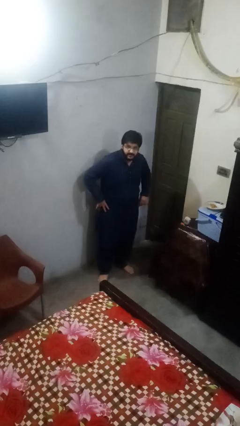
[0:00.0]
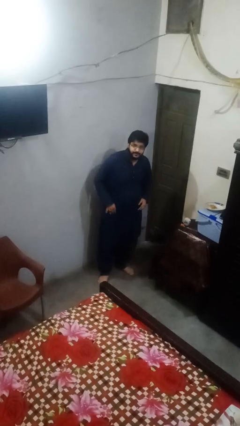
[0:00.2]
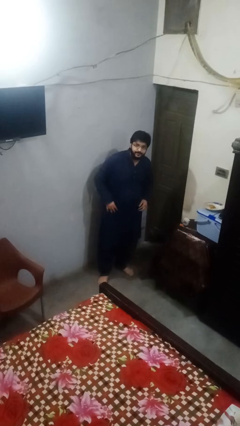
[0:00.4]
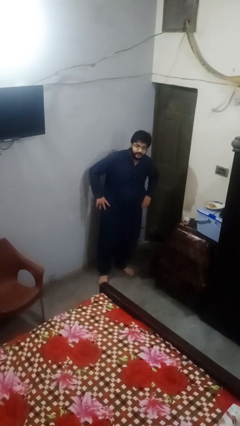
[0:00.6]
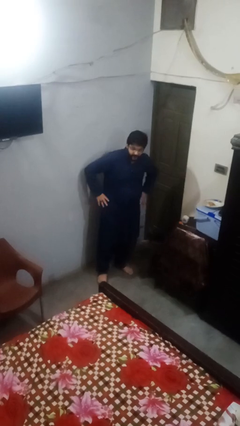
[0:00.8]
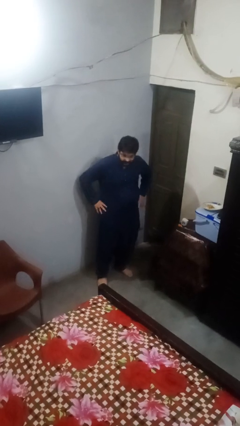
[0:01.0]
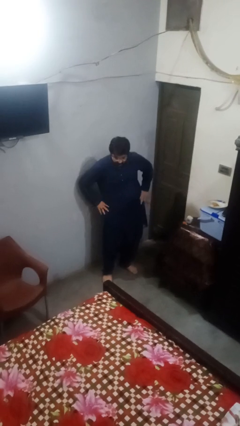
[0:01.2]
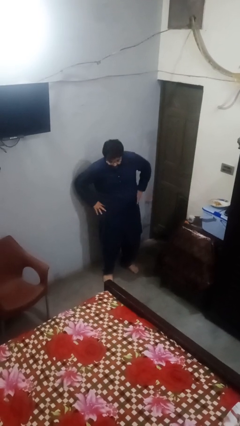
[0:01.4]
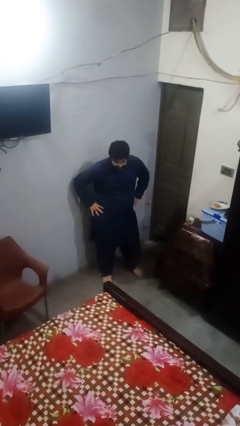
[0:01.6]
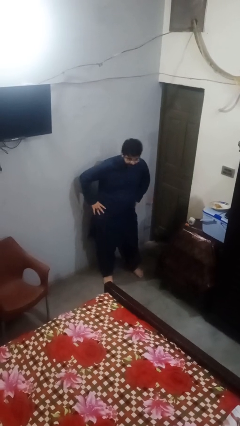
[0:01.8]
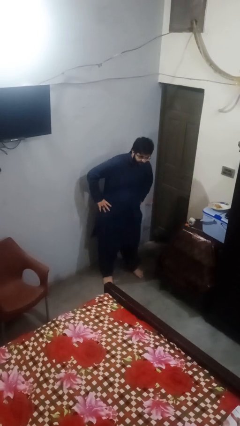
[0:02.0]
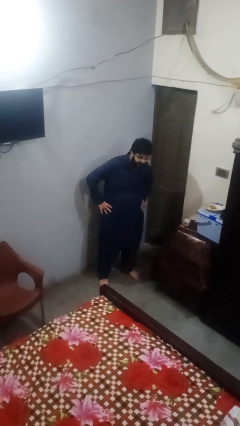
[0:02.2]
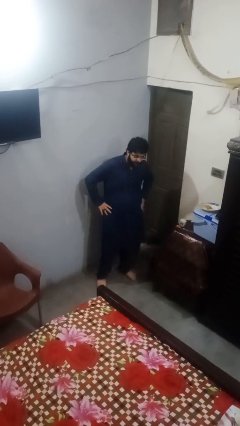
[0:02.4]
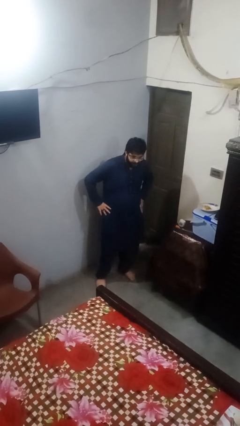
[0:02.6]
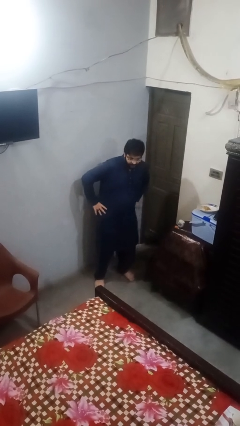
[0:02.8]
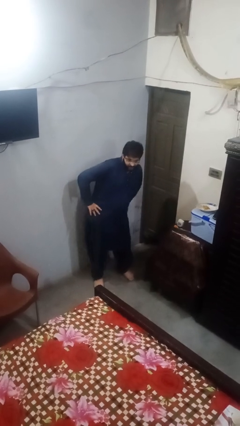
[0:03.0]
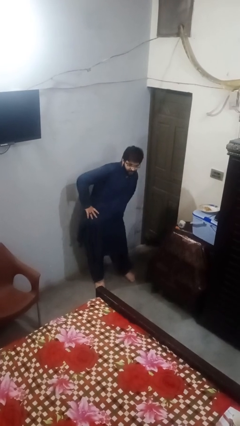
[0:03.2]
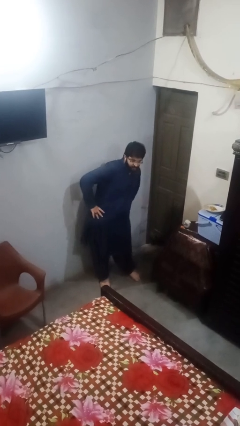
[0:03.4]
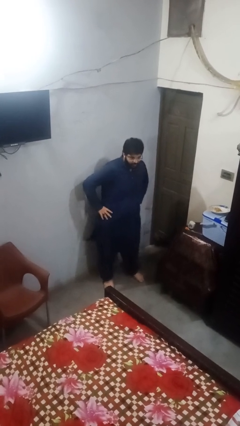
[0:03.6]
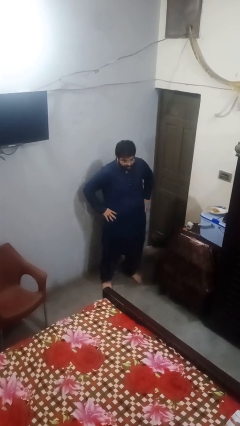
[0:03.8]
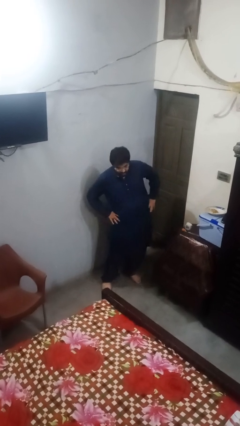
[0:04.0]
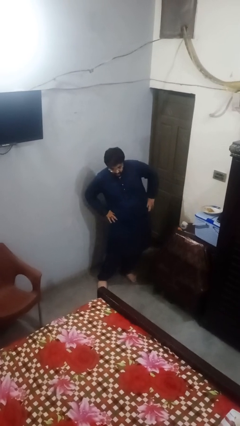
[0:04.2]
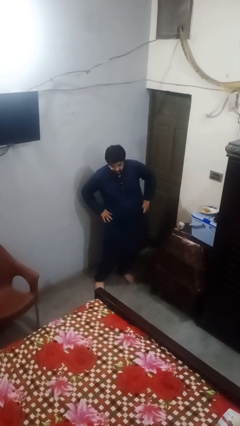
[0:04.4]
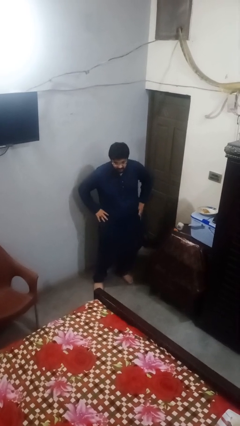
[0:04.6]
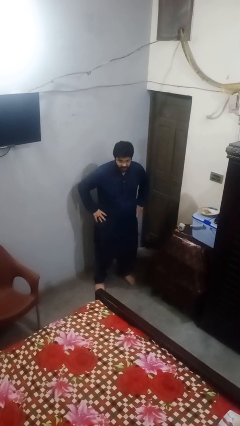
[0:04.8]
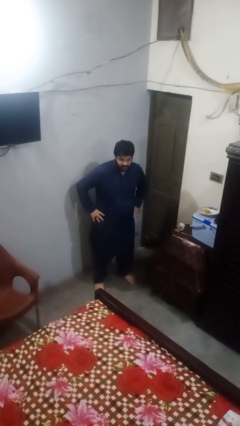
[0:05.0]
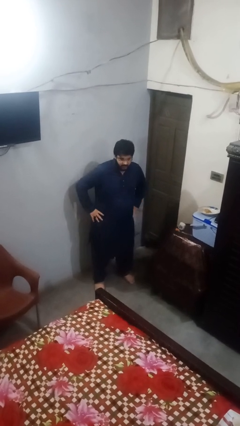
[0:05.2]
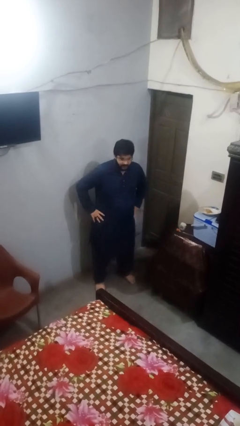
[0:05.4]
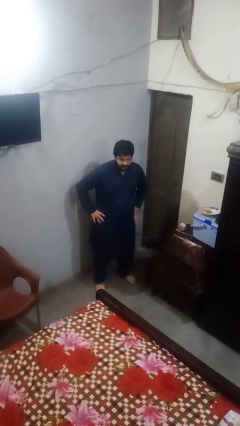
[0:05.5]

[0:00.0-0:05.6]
person wiggles hips

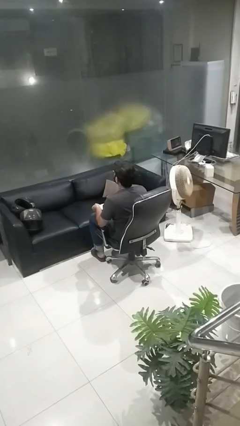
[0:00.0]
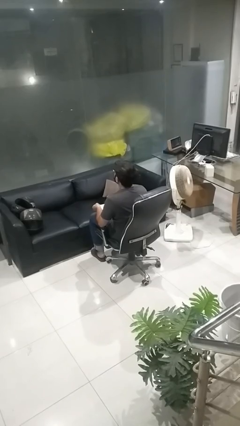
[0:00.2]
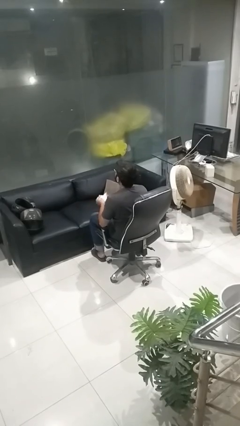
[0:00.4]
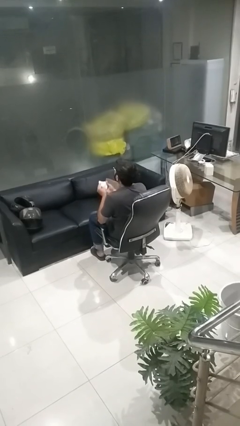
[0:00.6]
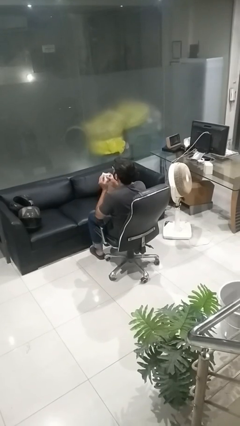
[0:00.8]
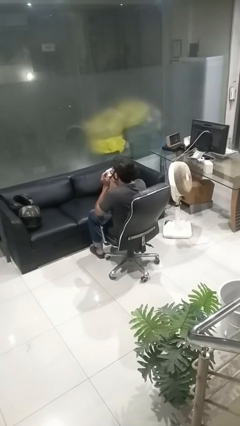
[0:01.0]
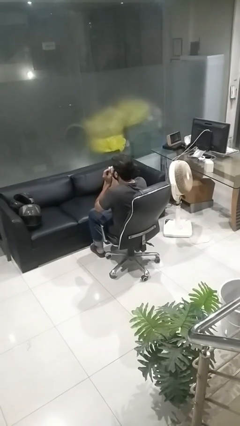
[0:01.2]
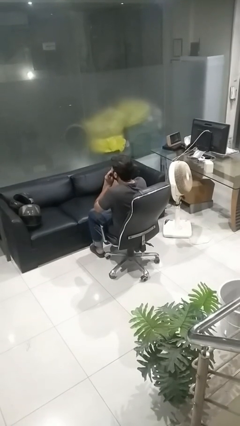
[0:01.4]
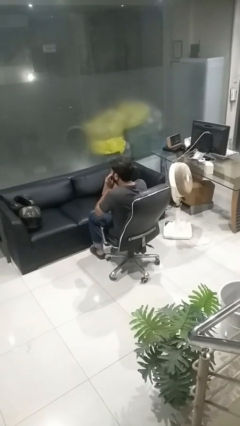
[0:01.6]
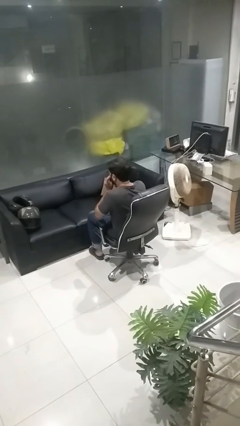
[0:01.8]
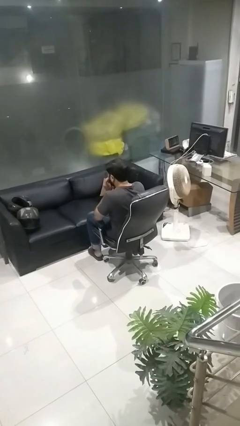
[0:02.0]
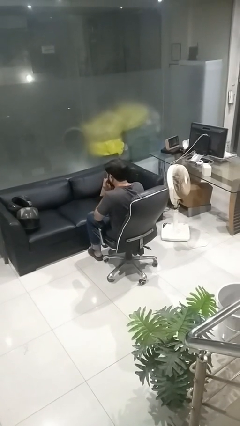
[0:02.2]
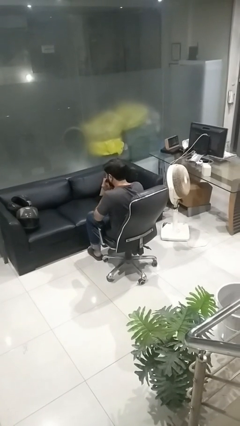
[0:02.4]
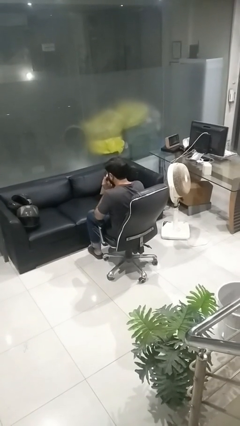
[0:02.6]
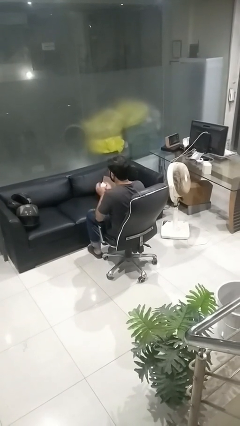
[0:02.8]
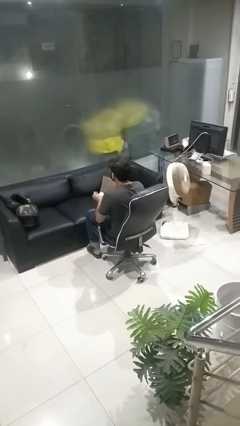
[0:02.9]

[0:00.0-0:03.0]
person blows nose

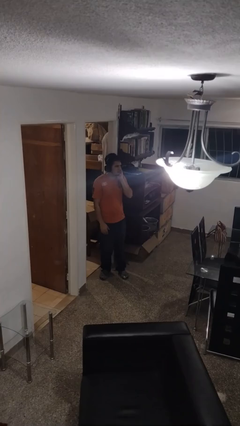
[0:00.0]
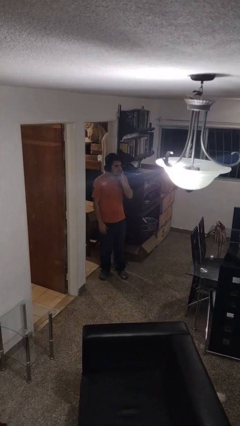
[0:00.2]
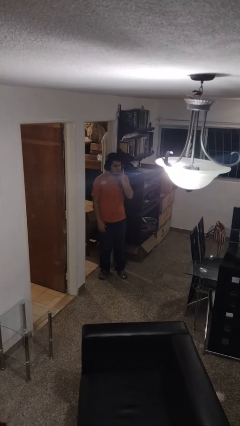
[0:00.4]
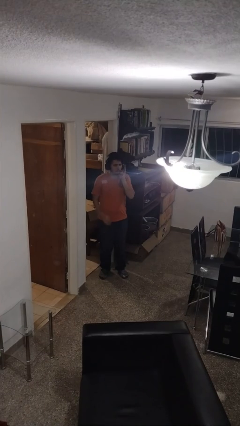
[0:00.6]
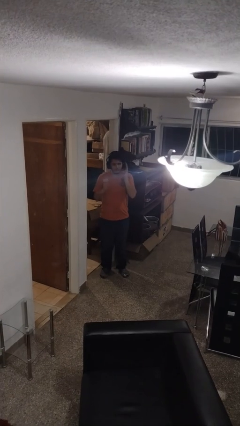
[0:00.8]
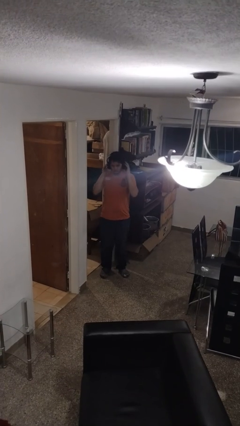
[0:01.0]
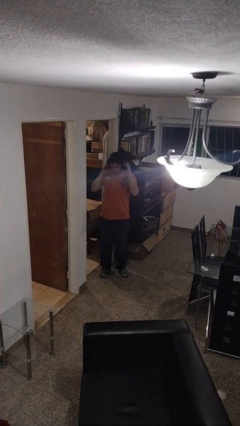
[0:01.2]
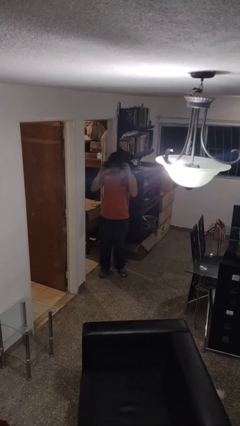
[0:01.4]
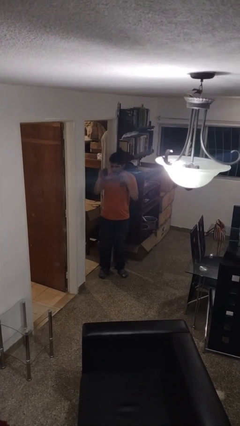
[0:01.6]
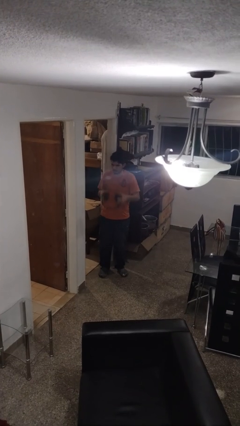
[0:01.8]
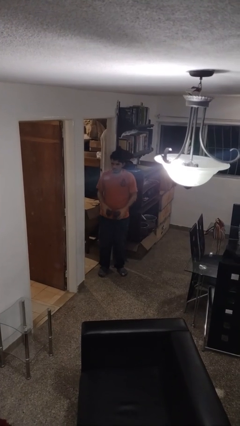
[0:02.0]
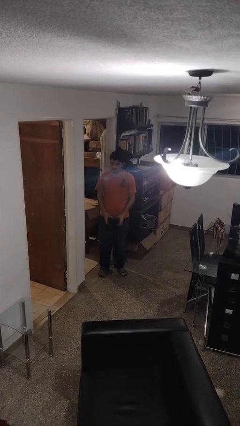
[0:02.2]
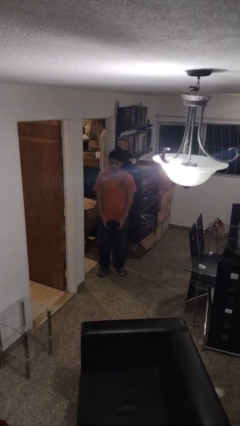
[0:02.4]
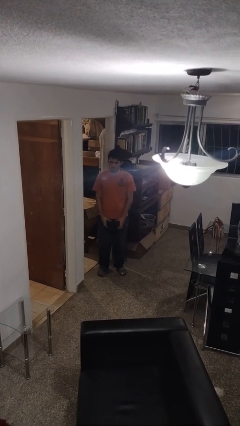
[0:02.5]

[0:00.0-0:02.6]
person takes off headphones

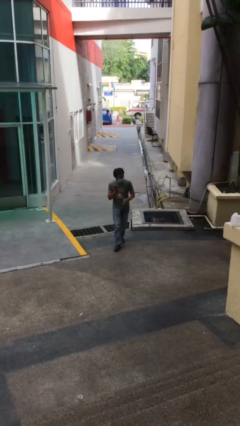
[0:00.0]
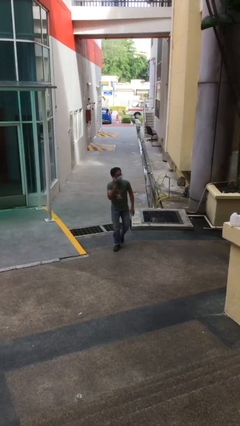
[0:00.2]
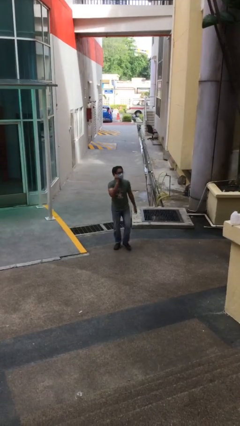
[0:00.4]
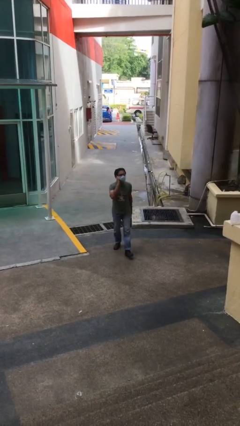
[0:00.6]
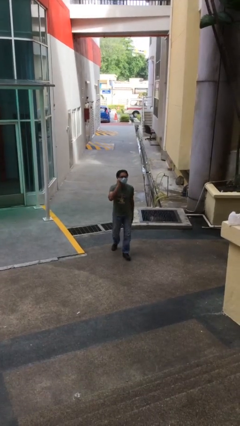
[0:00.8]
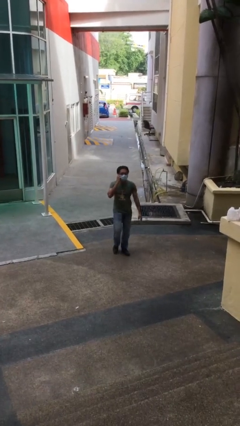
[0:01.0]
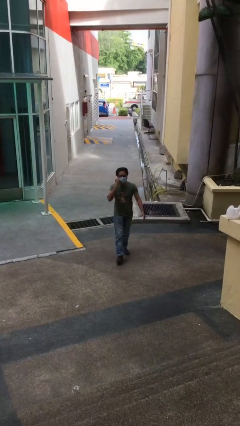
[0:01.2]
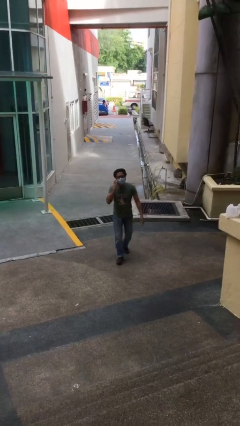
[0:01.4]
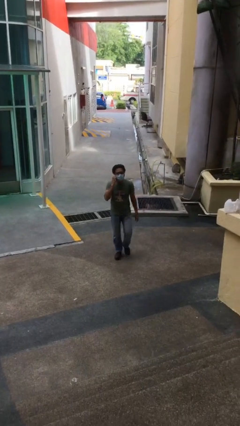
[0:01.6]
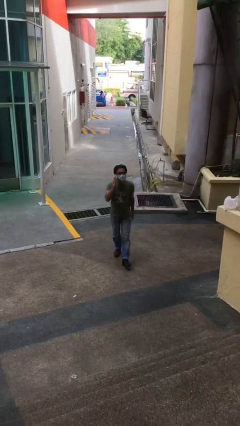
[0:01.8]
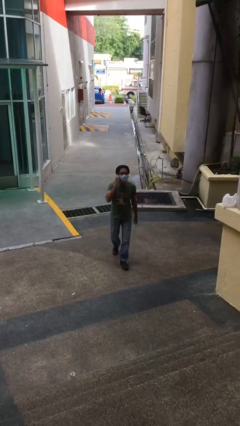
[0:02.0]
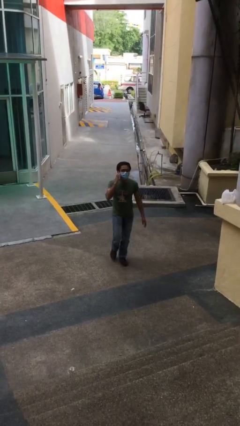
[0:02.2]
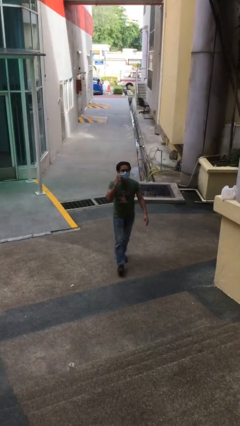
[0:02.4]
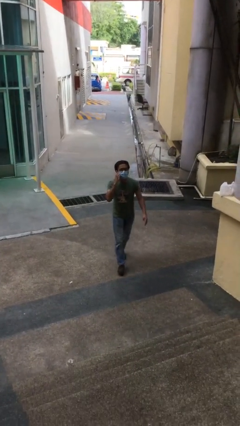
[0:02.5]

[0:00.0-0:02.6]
person talks on phone

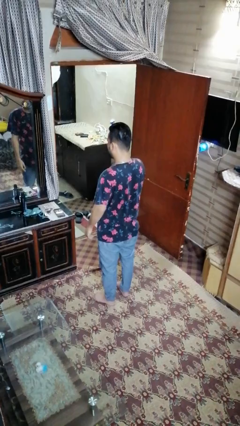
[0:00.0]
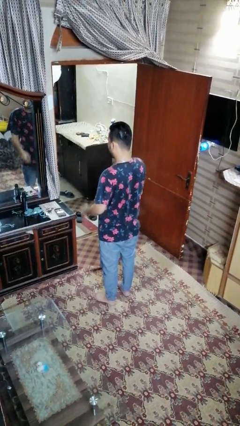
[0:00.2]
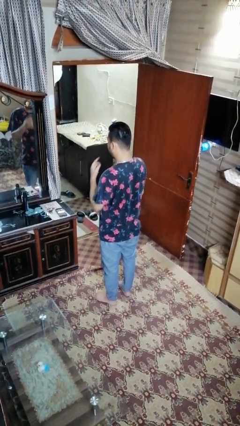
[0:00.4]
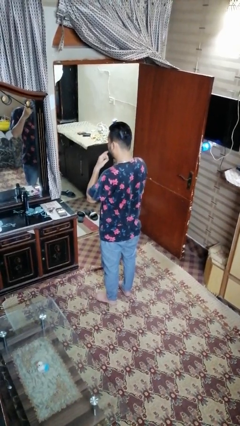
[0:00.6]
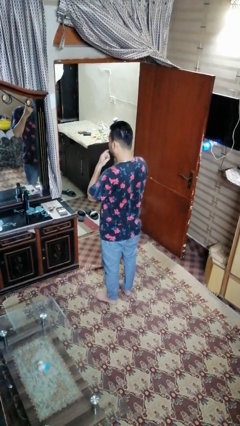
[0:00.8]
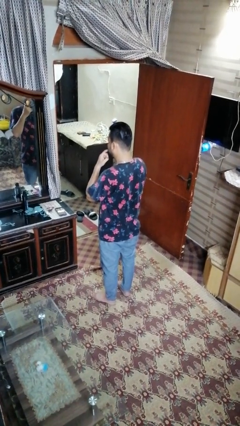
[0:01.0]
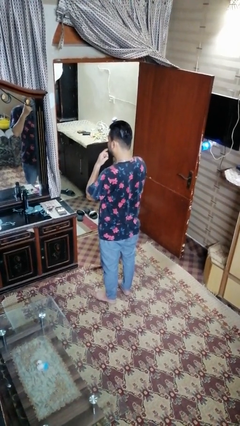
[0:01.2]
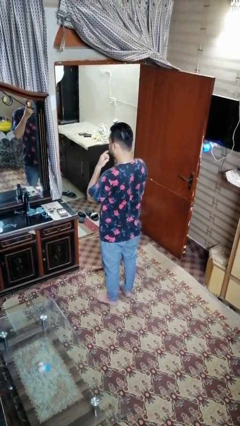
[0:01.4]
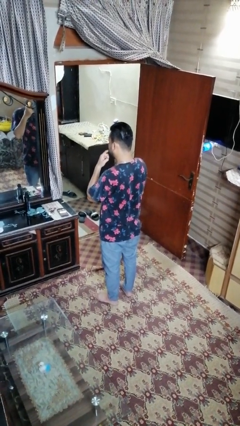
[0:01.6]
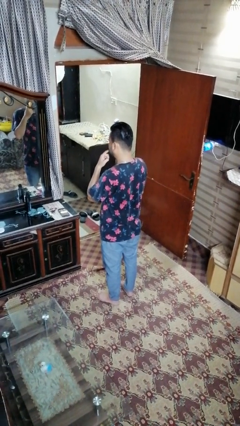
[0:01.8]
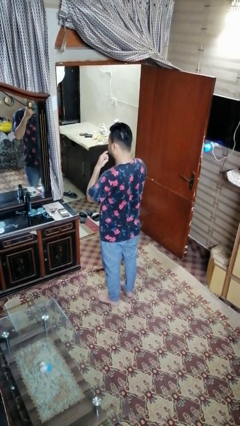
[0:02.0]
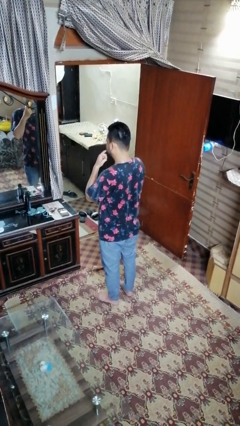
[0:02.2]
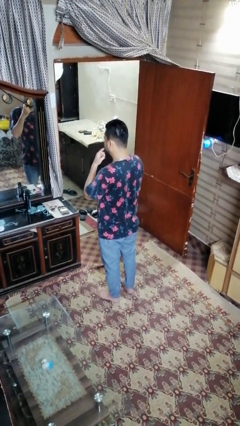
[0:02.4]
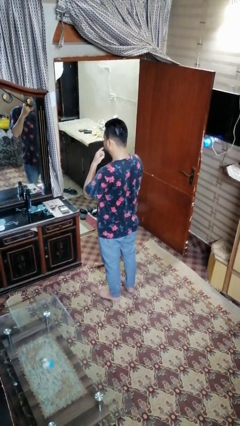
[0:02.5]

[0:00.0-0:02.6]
person licks fingers

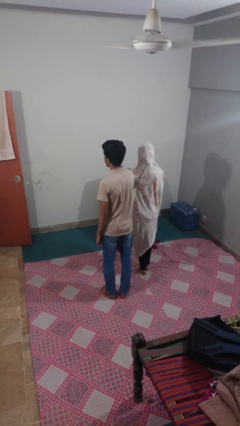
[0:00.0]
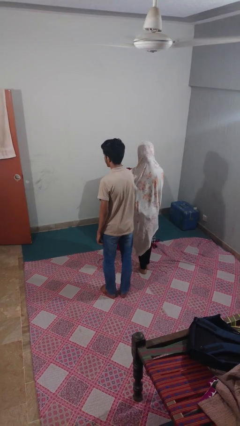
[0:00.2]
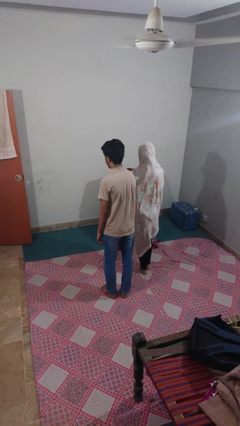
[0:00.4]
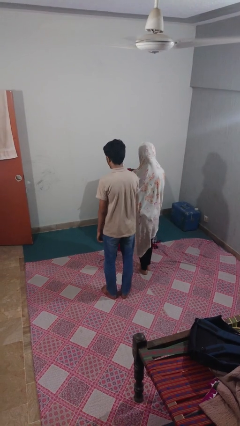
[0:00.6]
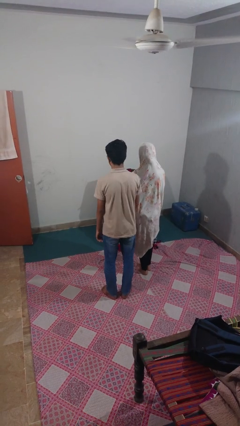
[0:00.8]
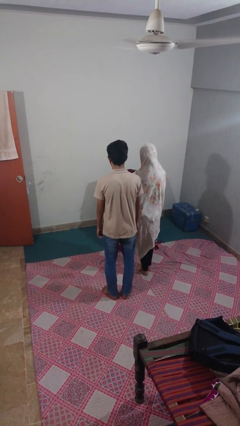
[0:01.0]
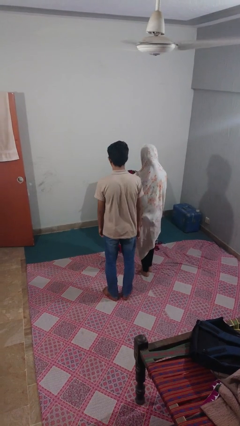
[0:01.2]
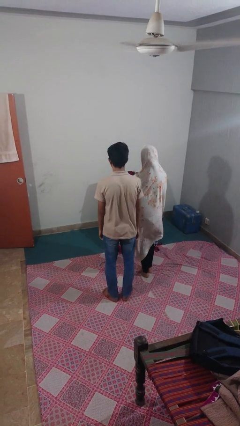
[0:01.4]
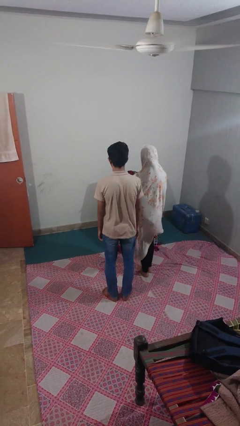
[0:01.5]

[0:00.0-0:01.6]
person nudges person with elbow
